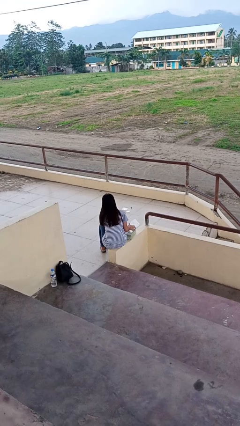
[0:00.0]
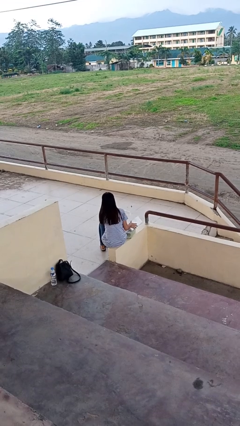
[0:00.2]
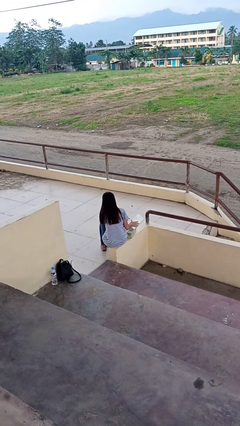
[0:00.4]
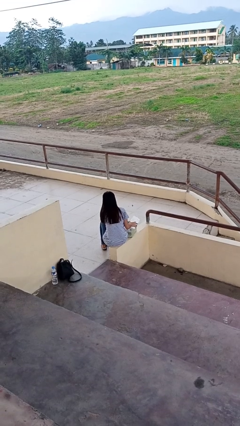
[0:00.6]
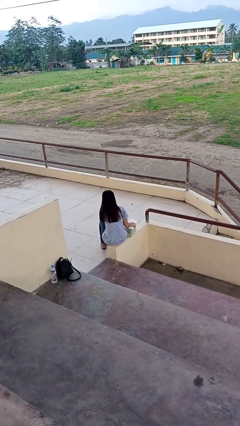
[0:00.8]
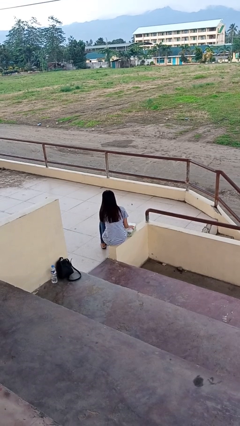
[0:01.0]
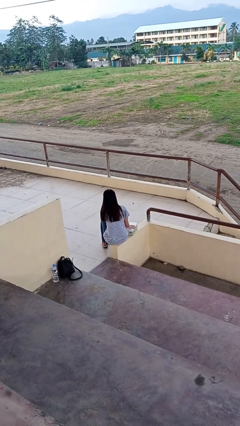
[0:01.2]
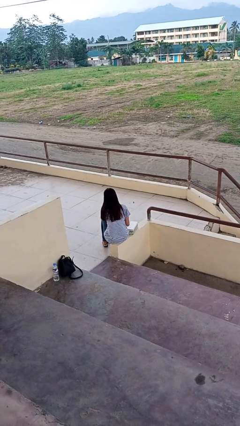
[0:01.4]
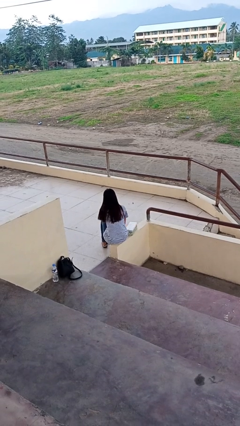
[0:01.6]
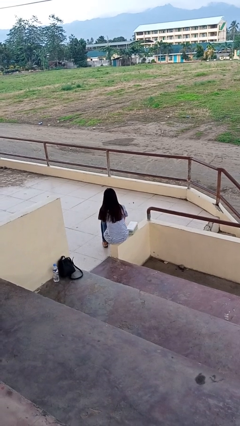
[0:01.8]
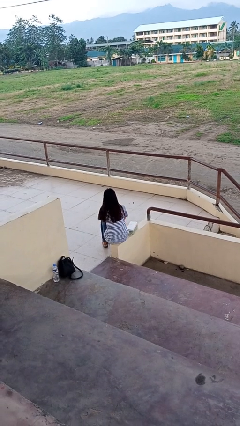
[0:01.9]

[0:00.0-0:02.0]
person puts object into box

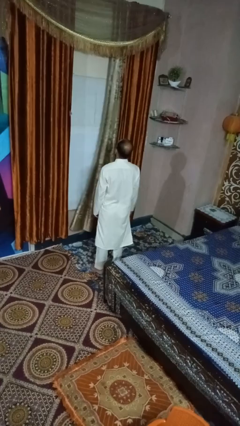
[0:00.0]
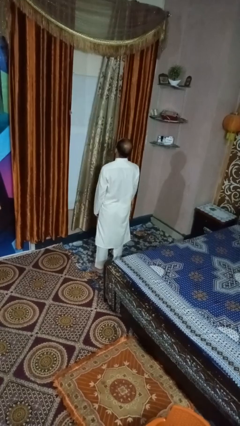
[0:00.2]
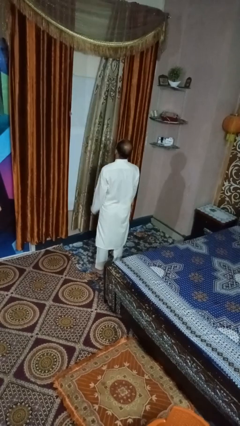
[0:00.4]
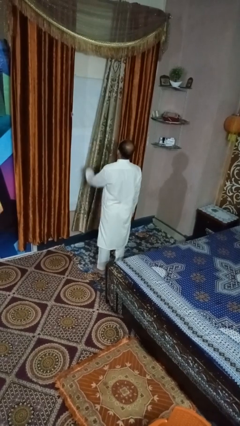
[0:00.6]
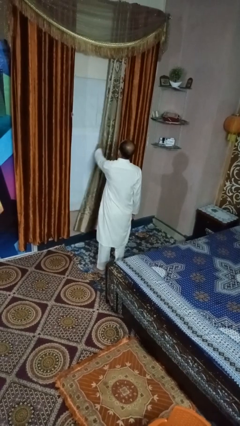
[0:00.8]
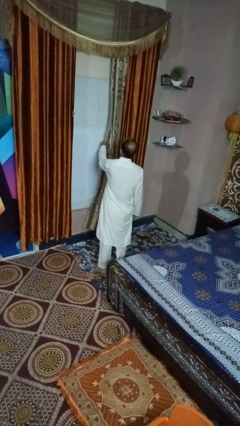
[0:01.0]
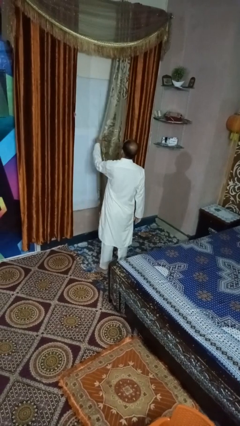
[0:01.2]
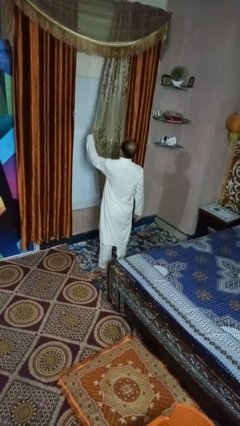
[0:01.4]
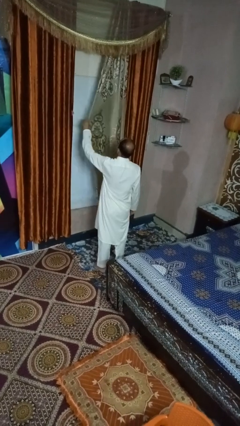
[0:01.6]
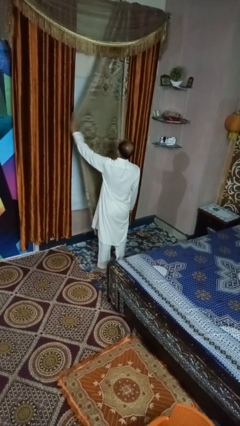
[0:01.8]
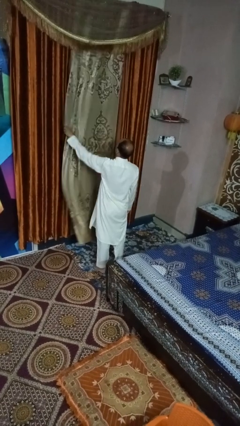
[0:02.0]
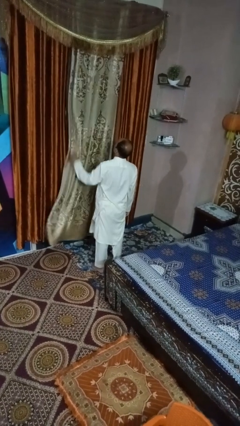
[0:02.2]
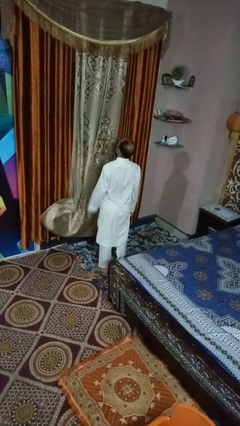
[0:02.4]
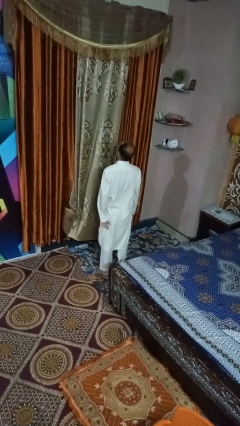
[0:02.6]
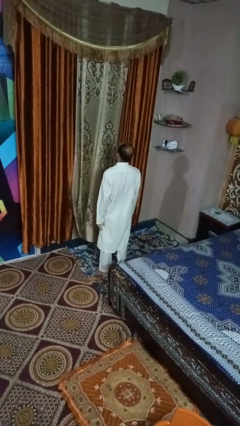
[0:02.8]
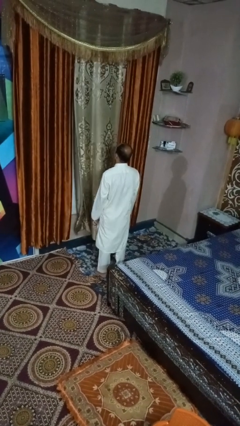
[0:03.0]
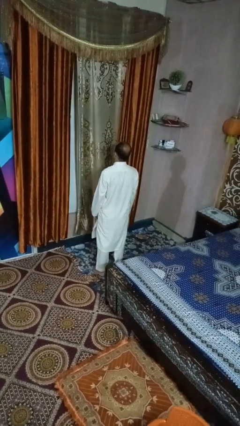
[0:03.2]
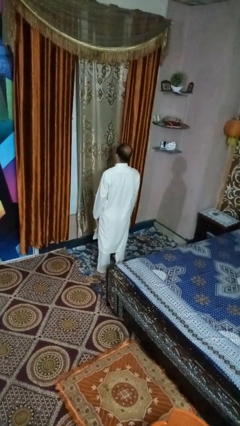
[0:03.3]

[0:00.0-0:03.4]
person closes curtains

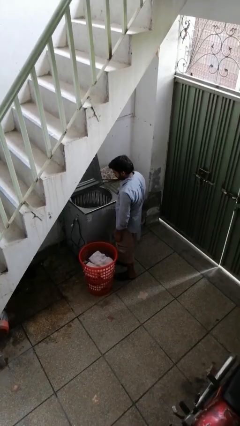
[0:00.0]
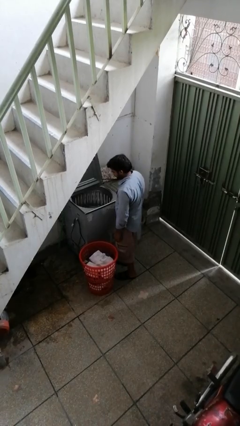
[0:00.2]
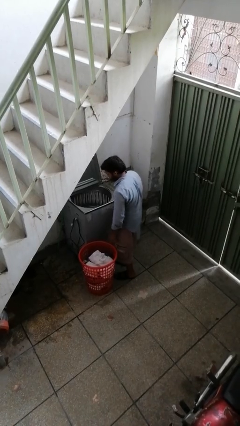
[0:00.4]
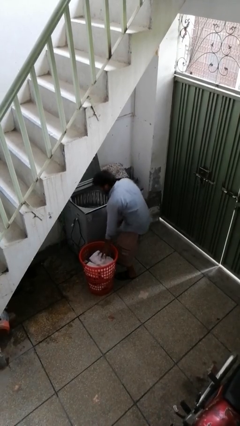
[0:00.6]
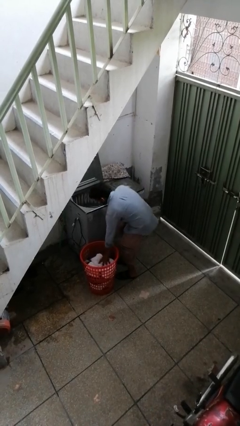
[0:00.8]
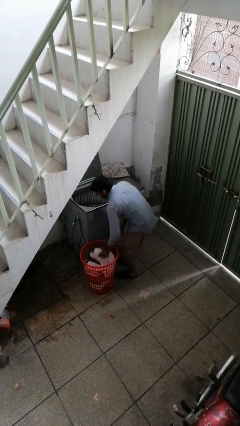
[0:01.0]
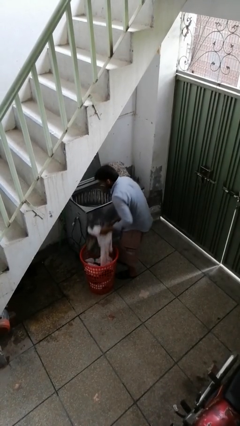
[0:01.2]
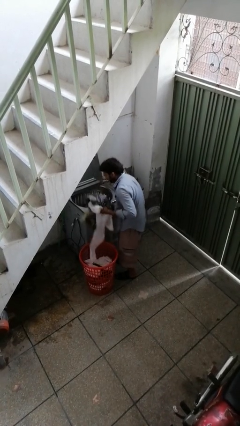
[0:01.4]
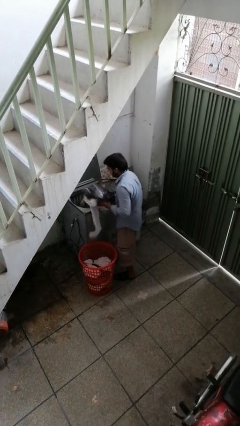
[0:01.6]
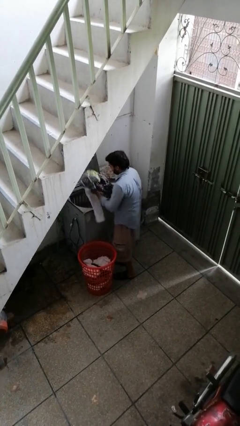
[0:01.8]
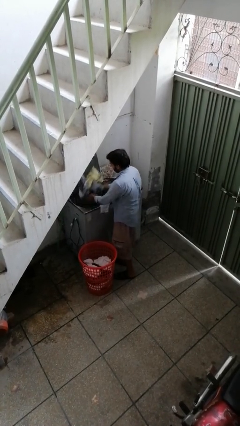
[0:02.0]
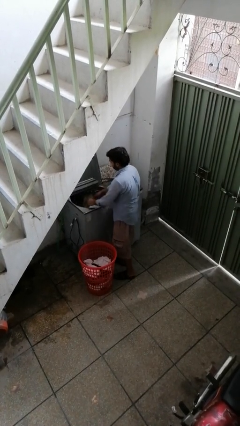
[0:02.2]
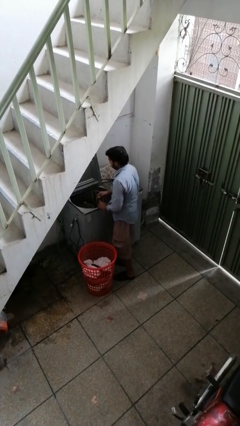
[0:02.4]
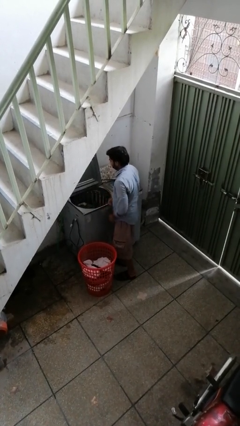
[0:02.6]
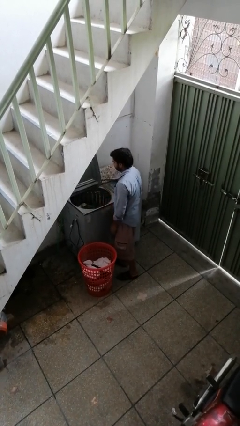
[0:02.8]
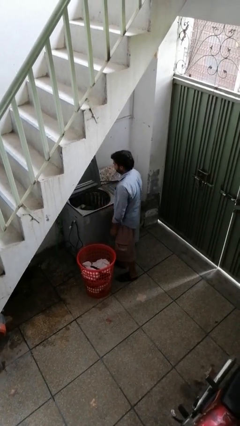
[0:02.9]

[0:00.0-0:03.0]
person loads clotheswasher

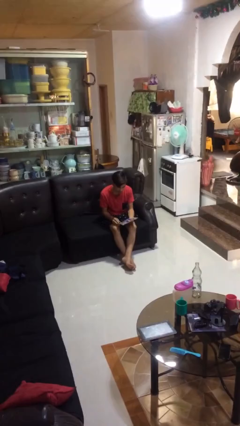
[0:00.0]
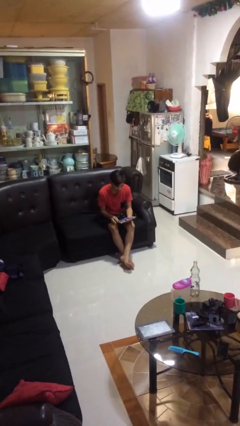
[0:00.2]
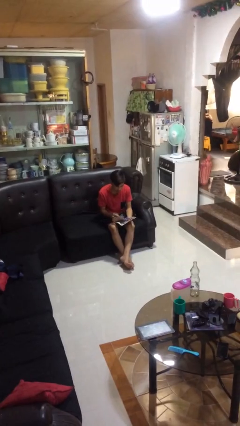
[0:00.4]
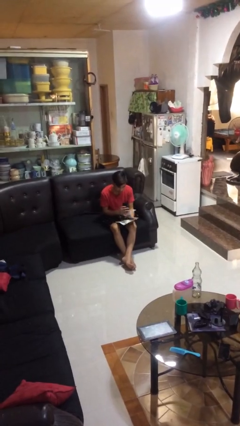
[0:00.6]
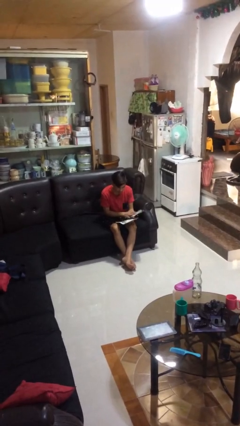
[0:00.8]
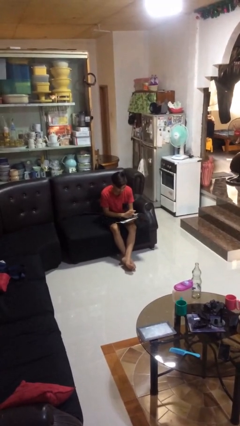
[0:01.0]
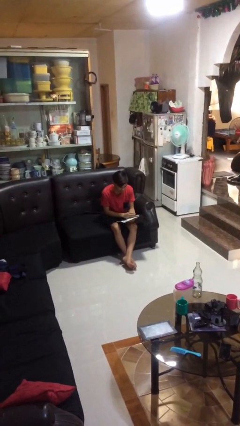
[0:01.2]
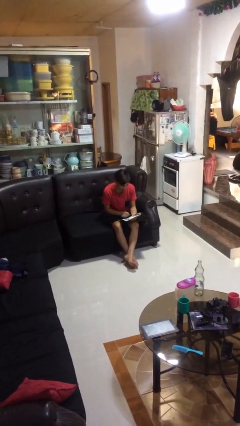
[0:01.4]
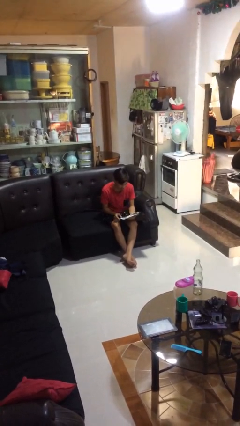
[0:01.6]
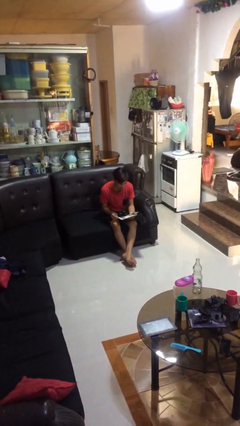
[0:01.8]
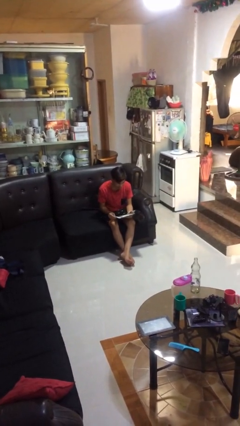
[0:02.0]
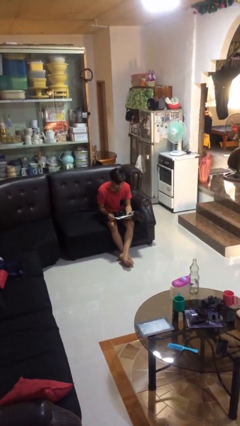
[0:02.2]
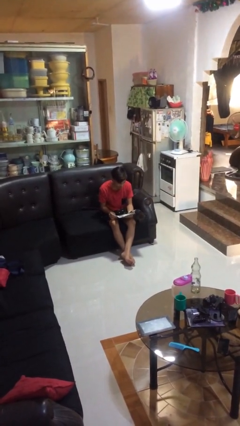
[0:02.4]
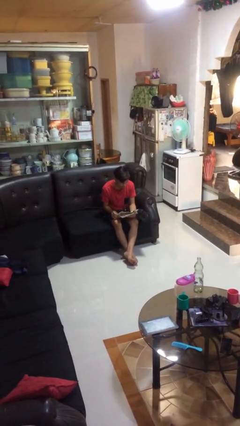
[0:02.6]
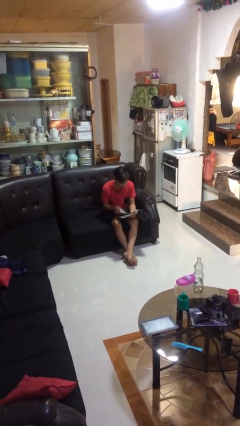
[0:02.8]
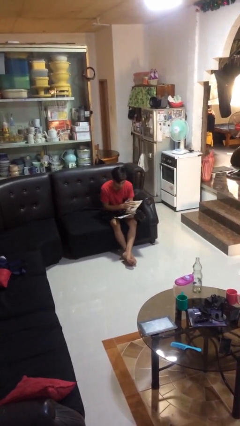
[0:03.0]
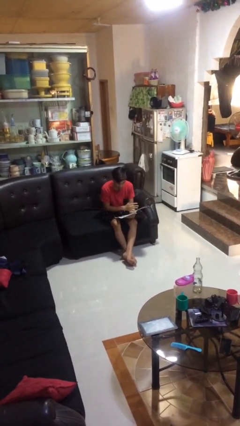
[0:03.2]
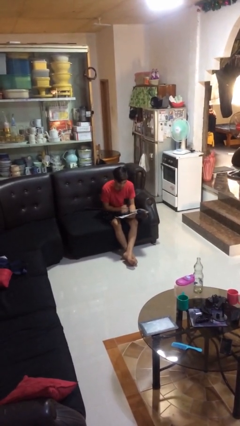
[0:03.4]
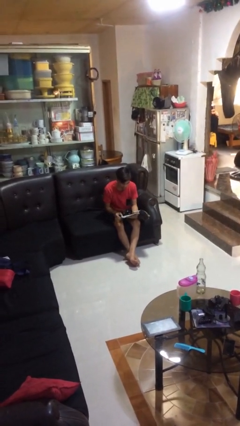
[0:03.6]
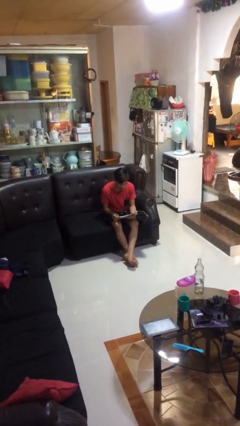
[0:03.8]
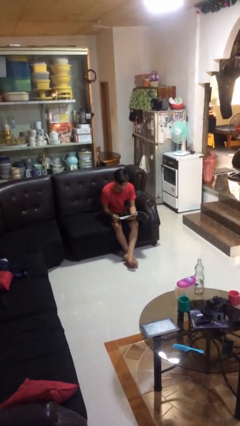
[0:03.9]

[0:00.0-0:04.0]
person reads magazine

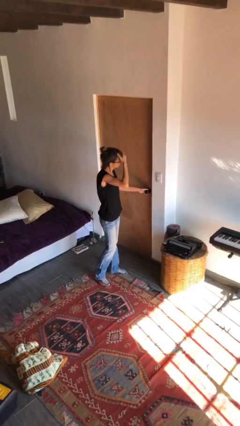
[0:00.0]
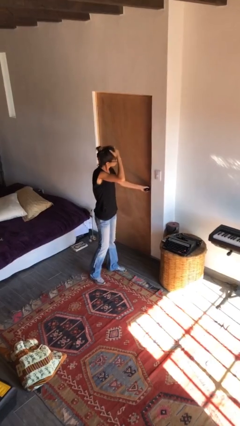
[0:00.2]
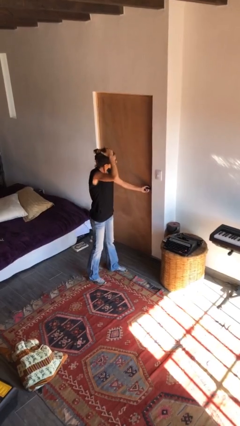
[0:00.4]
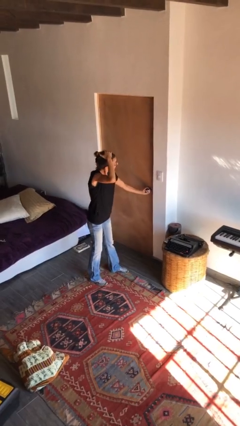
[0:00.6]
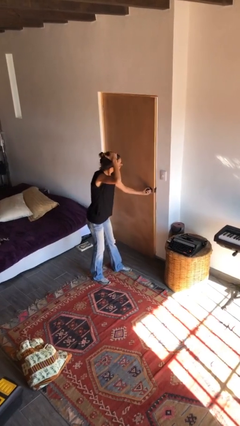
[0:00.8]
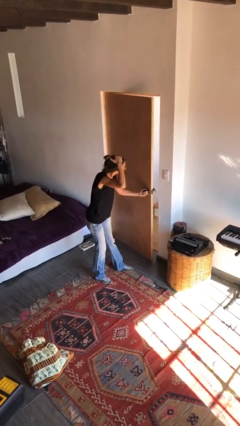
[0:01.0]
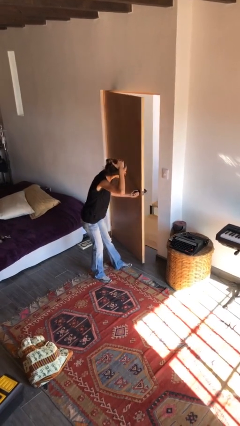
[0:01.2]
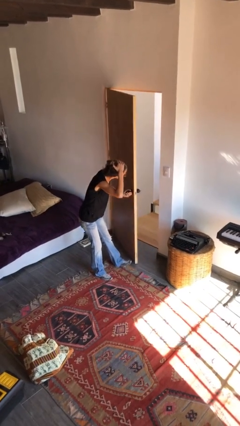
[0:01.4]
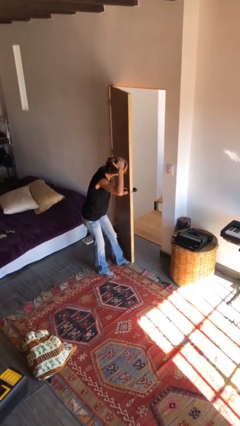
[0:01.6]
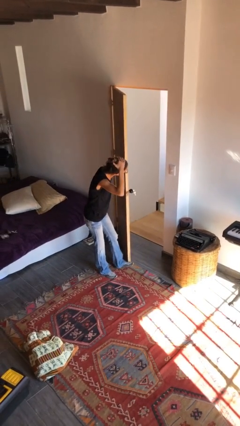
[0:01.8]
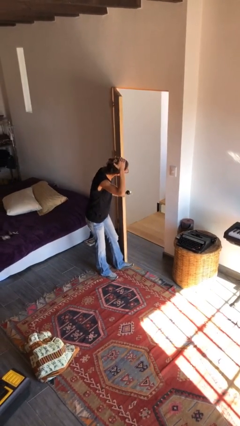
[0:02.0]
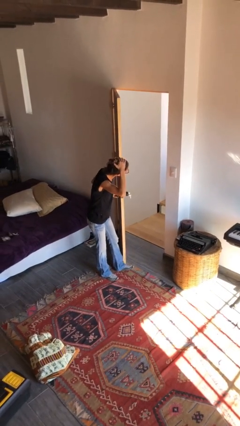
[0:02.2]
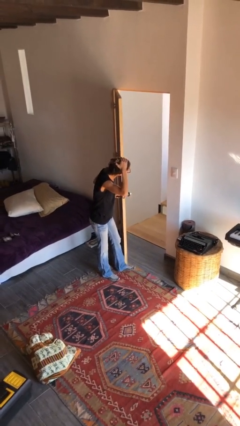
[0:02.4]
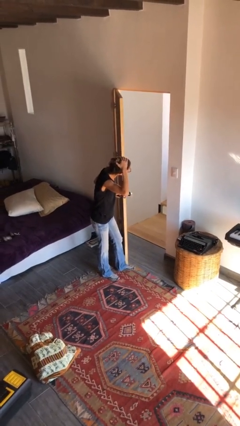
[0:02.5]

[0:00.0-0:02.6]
person opens facility door

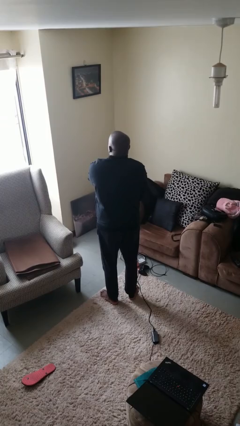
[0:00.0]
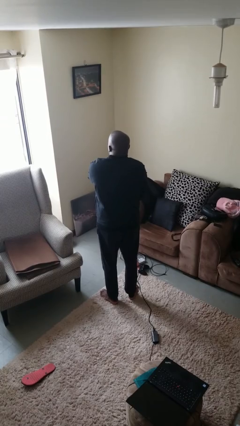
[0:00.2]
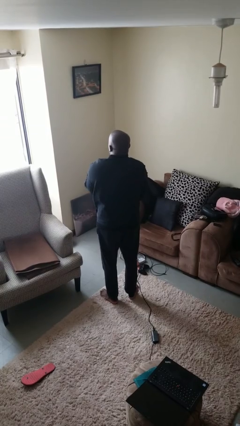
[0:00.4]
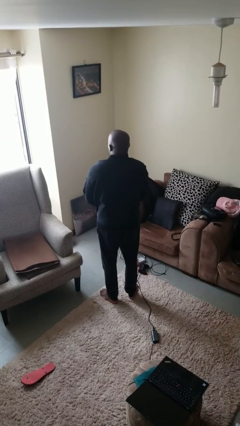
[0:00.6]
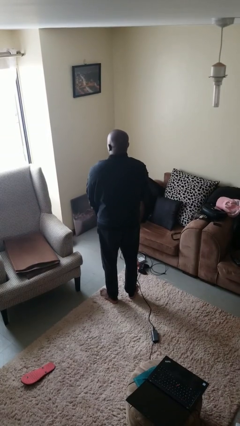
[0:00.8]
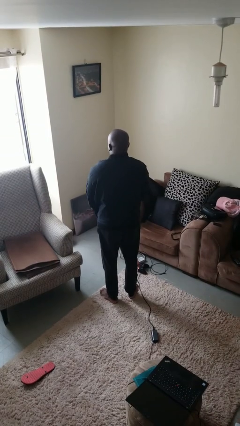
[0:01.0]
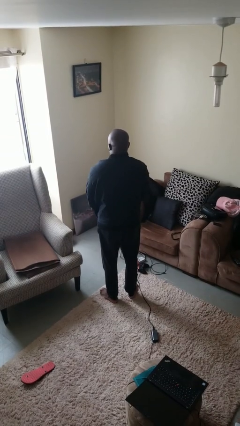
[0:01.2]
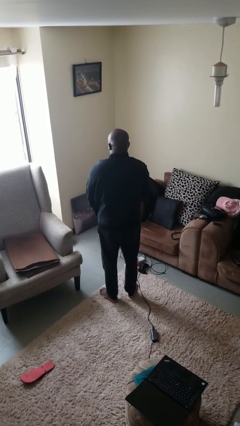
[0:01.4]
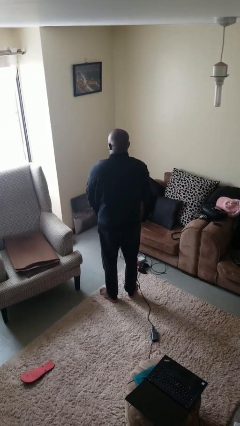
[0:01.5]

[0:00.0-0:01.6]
person unzips jacket

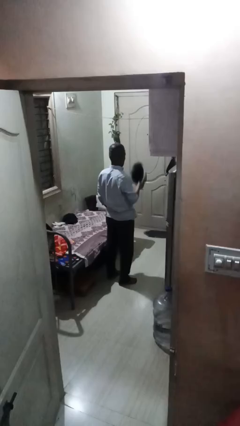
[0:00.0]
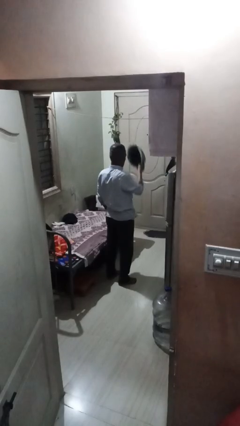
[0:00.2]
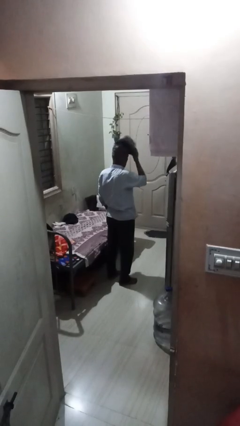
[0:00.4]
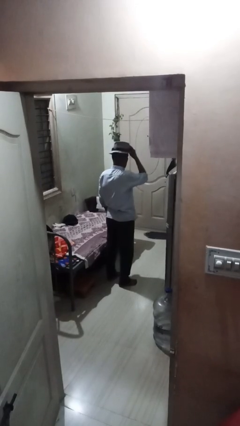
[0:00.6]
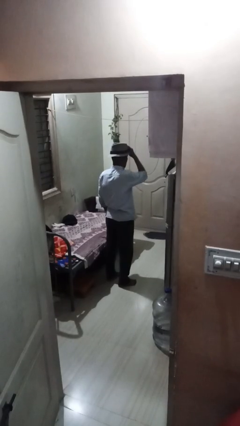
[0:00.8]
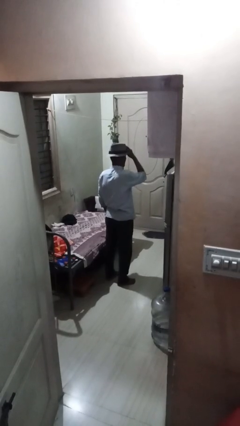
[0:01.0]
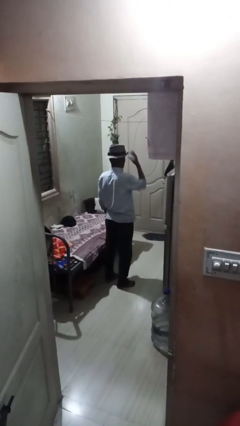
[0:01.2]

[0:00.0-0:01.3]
person puts on hat
